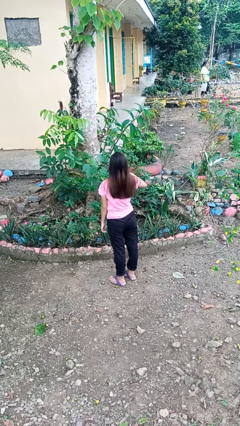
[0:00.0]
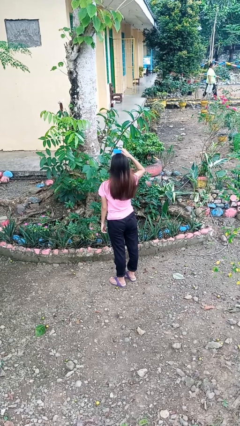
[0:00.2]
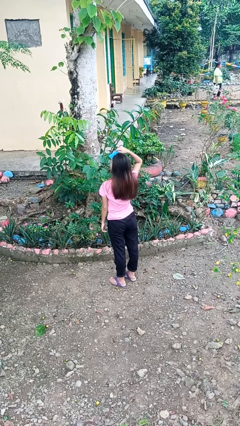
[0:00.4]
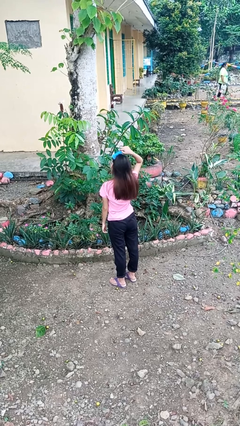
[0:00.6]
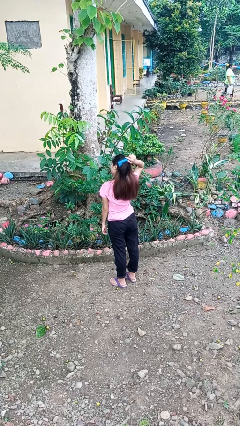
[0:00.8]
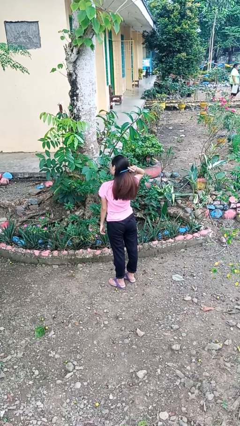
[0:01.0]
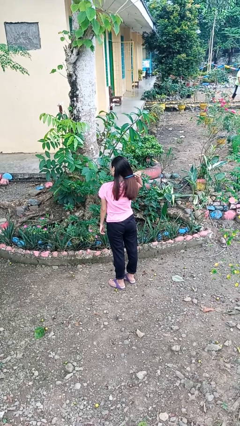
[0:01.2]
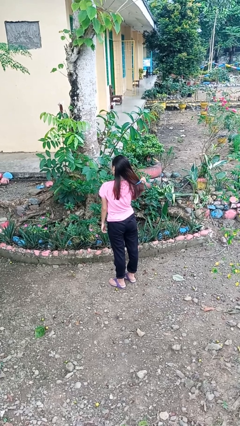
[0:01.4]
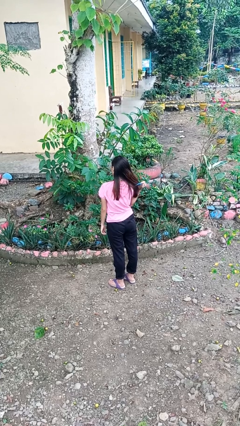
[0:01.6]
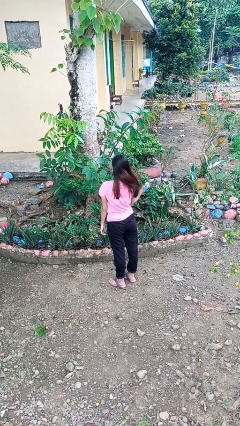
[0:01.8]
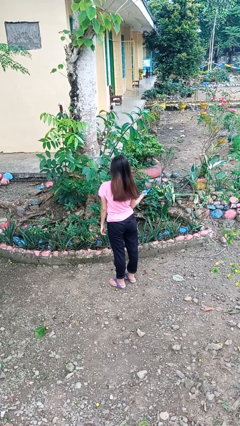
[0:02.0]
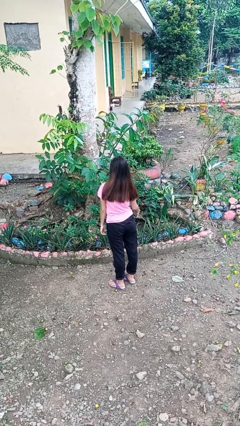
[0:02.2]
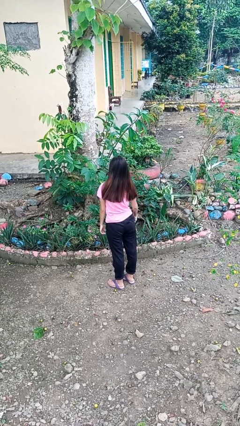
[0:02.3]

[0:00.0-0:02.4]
person brushes hair

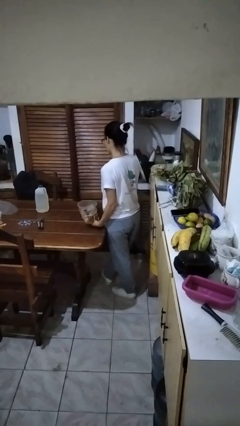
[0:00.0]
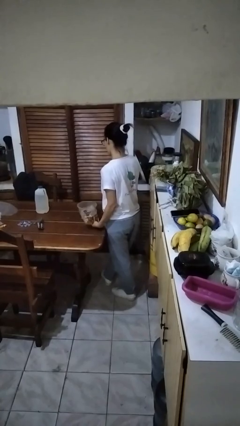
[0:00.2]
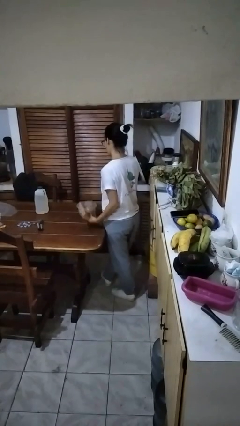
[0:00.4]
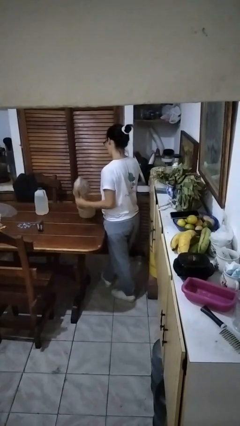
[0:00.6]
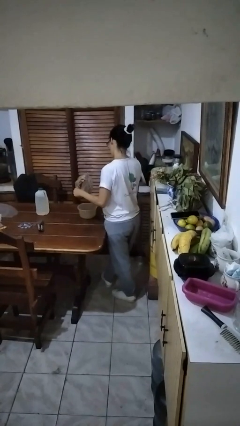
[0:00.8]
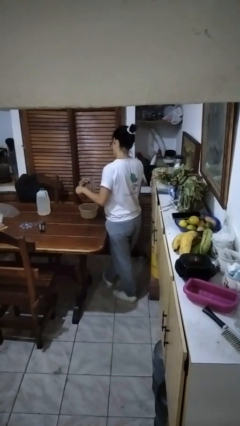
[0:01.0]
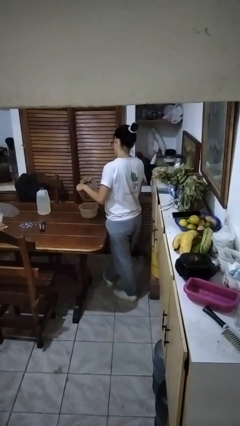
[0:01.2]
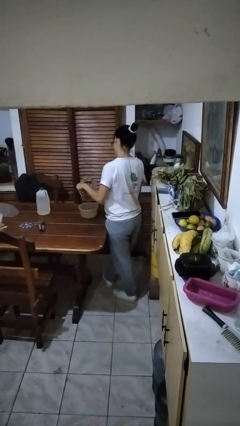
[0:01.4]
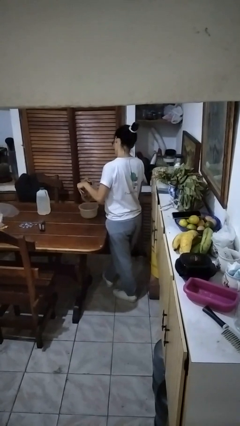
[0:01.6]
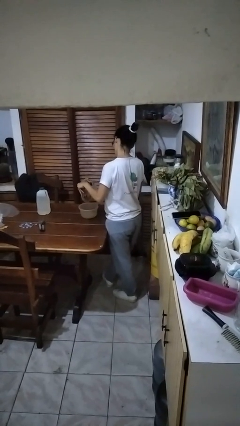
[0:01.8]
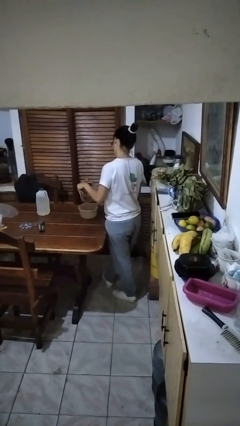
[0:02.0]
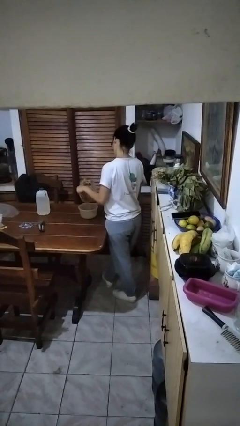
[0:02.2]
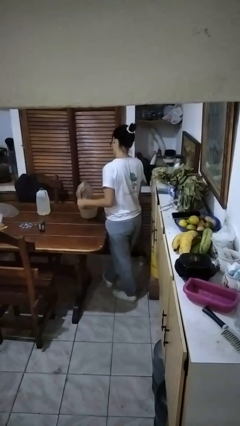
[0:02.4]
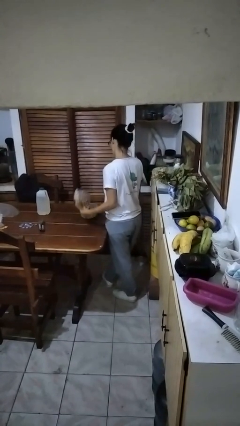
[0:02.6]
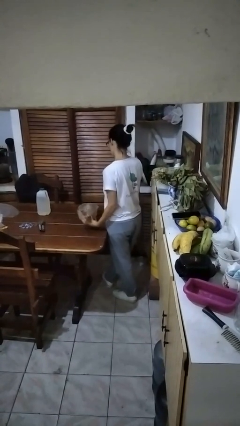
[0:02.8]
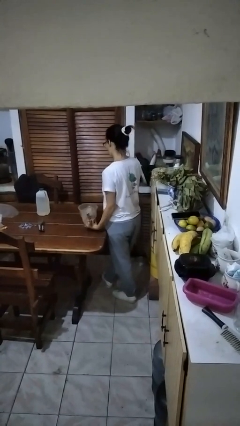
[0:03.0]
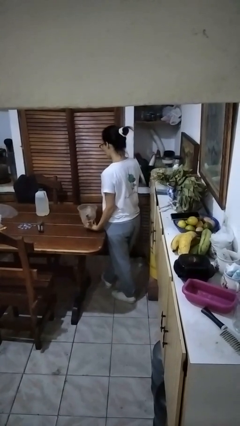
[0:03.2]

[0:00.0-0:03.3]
person pours into bowl

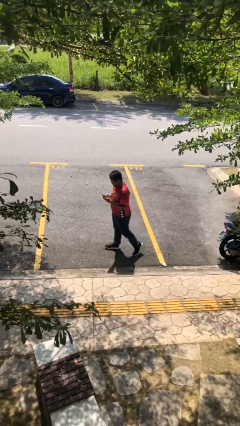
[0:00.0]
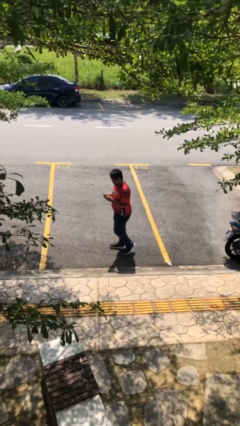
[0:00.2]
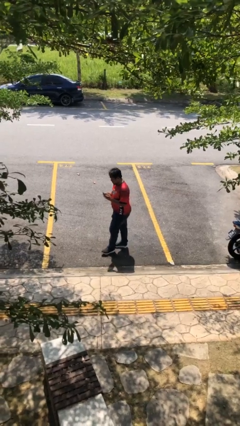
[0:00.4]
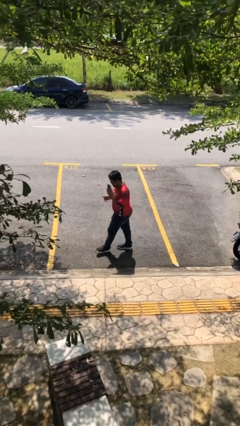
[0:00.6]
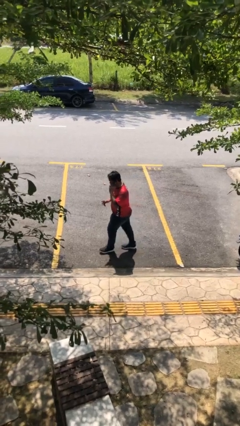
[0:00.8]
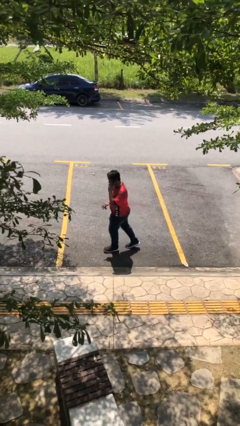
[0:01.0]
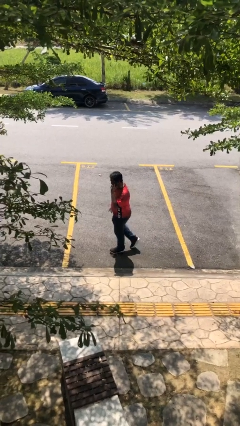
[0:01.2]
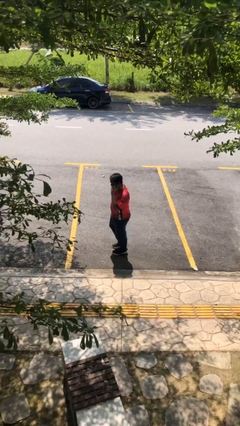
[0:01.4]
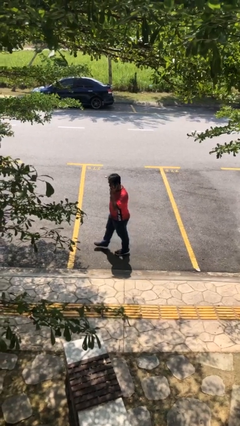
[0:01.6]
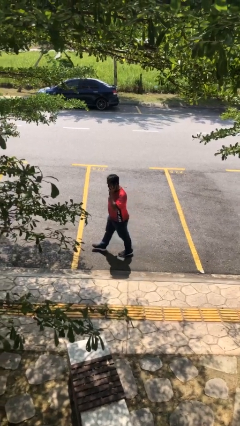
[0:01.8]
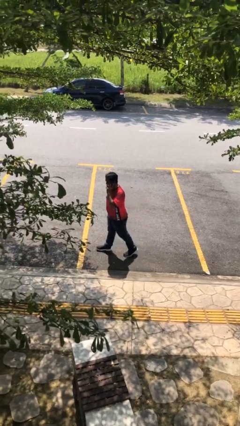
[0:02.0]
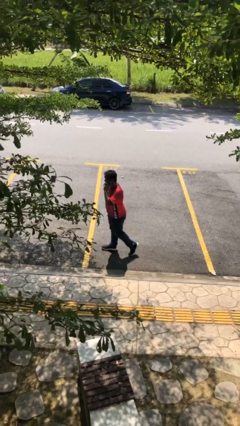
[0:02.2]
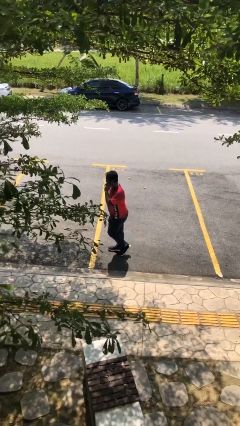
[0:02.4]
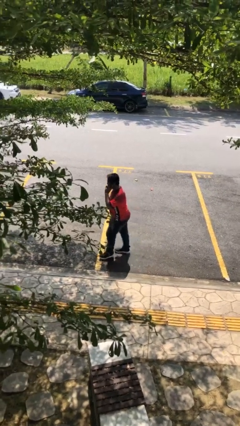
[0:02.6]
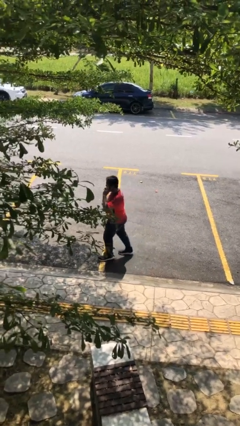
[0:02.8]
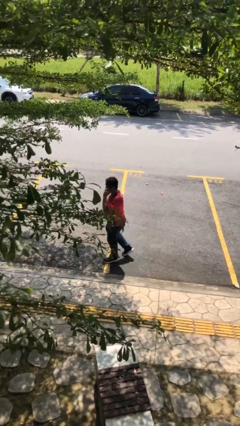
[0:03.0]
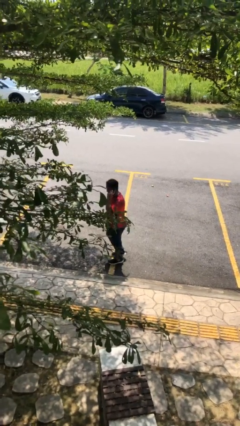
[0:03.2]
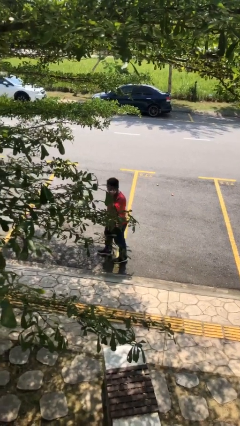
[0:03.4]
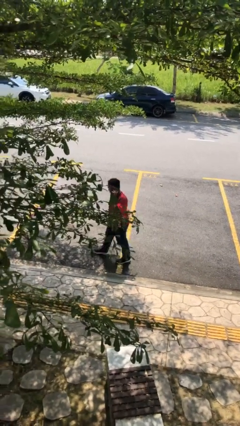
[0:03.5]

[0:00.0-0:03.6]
person talks on phone

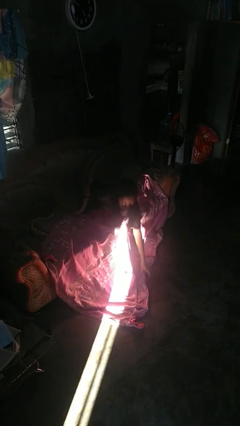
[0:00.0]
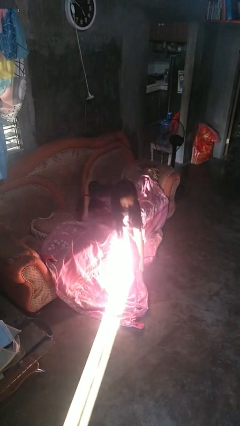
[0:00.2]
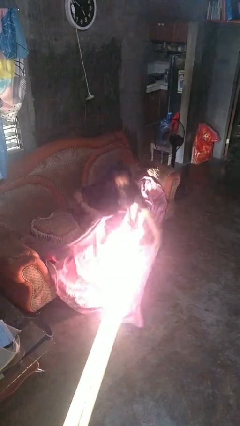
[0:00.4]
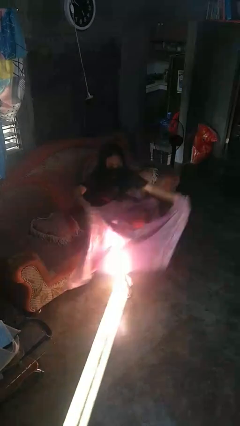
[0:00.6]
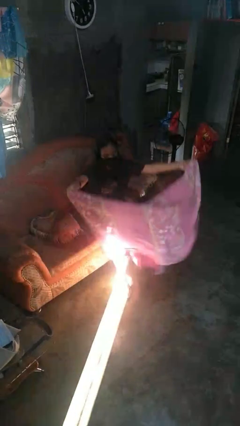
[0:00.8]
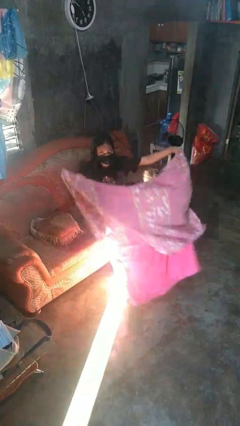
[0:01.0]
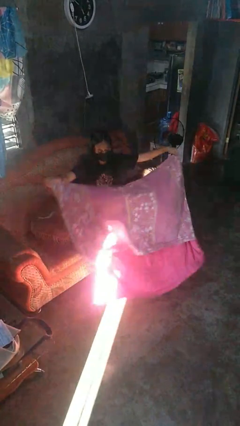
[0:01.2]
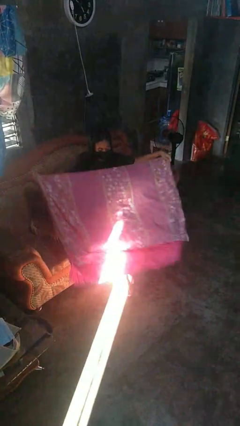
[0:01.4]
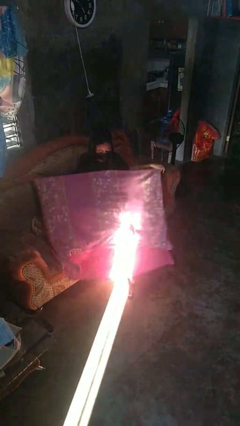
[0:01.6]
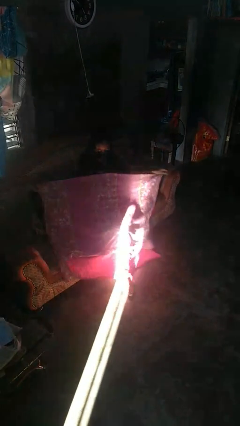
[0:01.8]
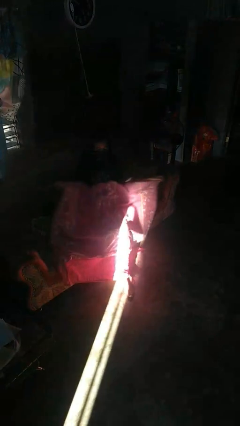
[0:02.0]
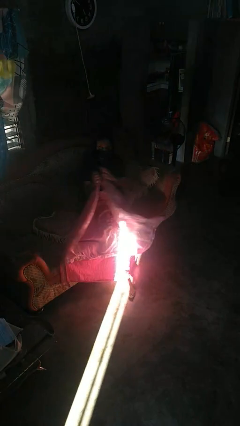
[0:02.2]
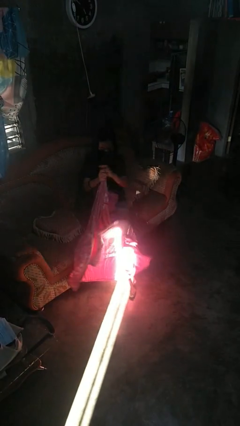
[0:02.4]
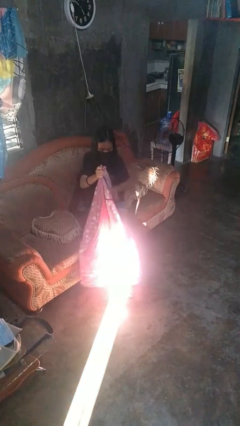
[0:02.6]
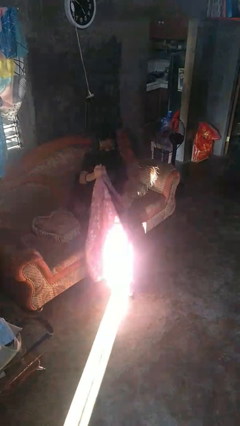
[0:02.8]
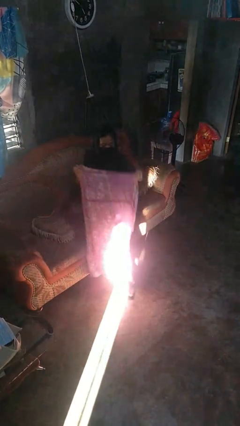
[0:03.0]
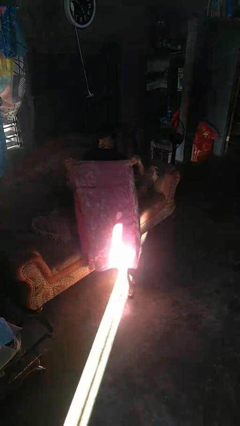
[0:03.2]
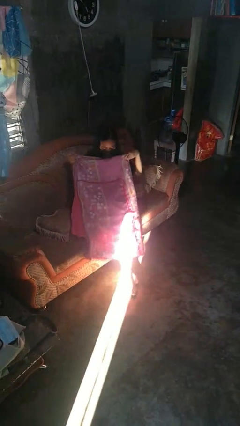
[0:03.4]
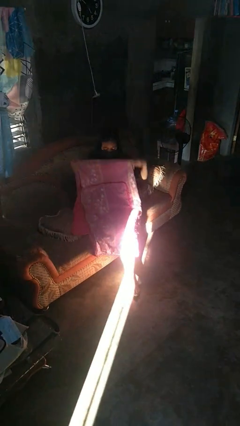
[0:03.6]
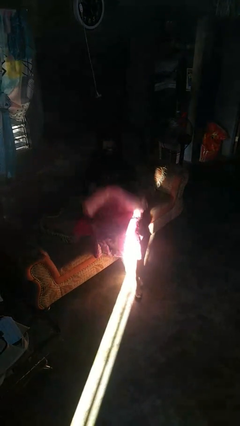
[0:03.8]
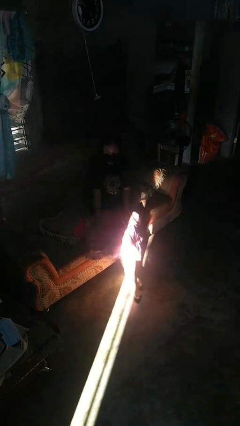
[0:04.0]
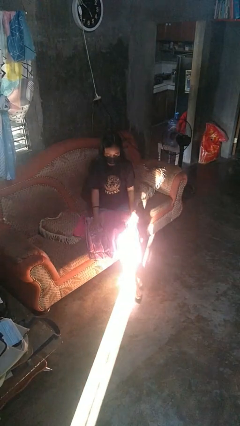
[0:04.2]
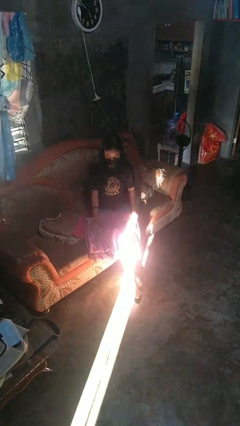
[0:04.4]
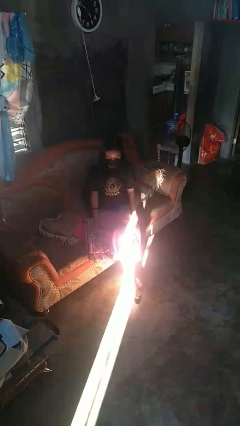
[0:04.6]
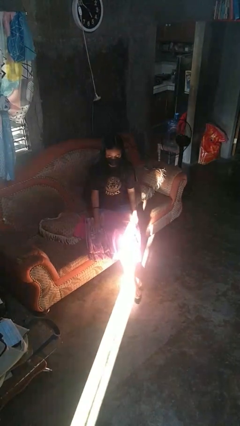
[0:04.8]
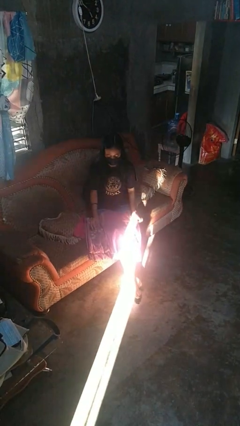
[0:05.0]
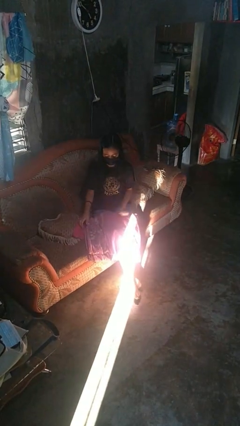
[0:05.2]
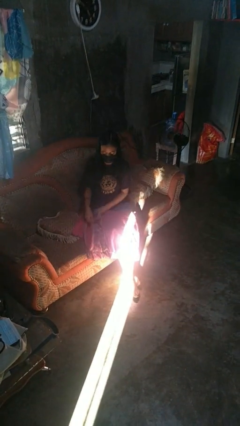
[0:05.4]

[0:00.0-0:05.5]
person folds blanket

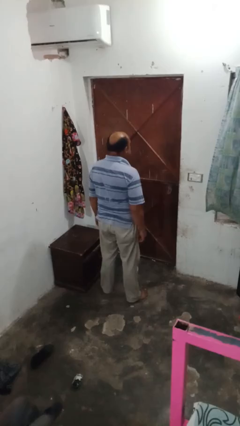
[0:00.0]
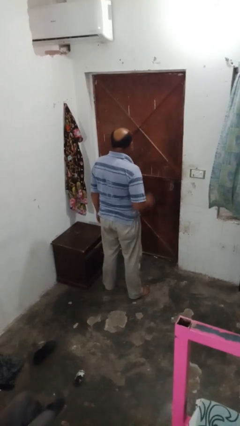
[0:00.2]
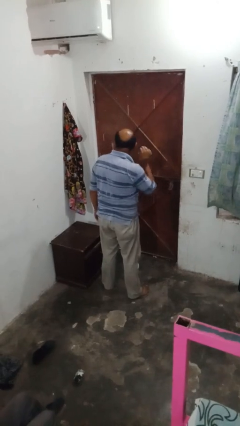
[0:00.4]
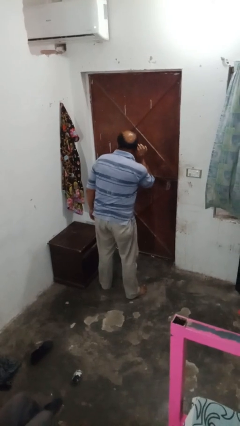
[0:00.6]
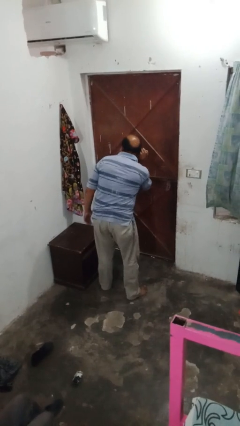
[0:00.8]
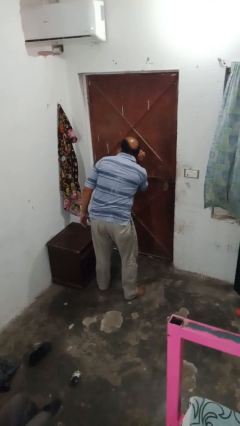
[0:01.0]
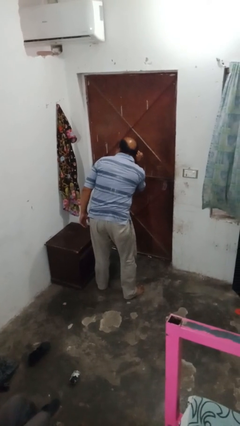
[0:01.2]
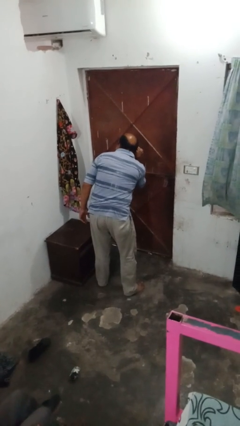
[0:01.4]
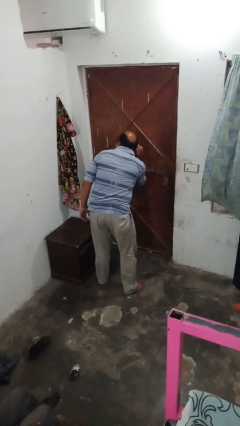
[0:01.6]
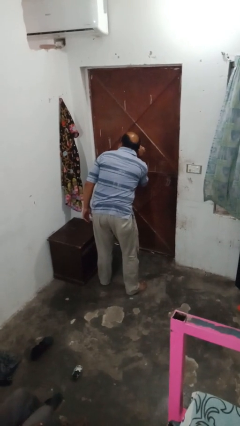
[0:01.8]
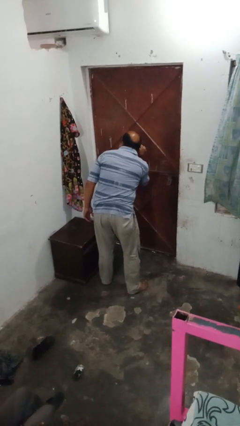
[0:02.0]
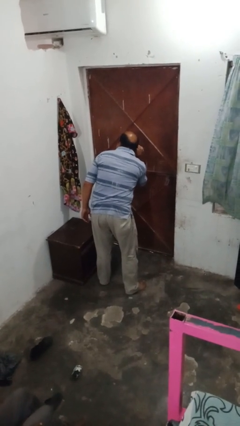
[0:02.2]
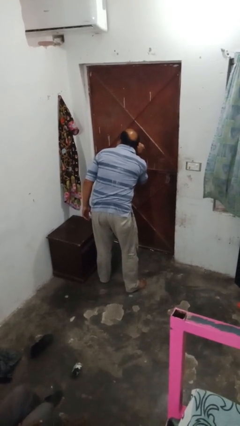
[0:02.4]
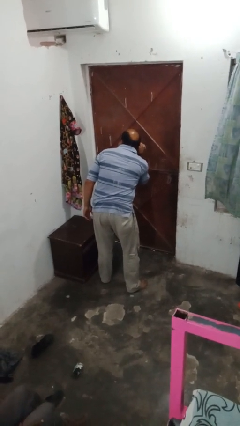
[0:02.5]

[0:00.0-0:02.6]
person gestures listen closely

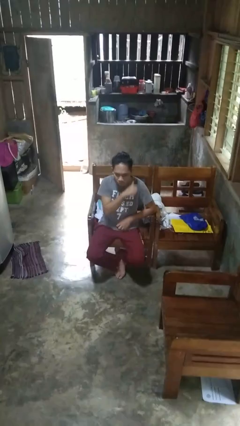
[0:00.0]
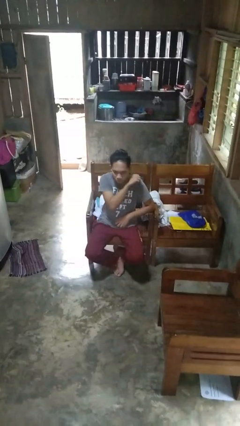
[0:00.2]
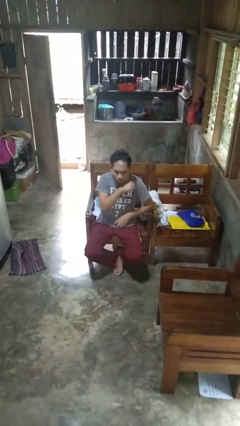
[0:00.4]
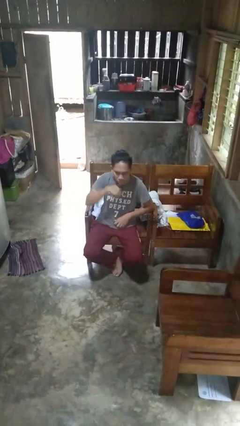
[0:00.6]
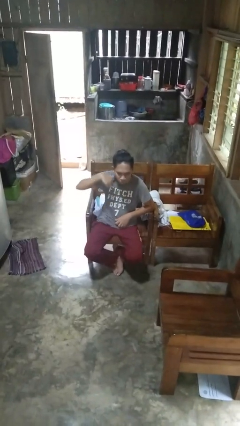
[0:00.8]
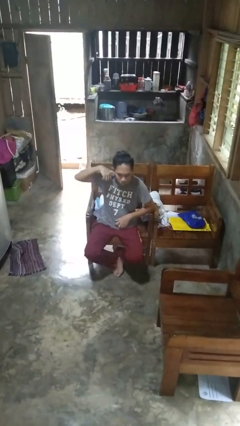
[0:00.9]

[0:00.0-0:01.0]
person gestures cut
